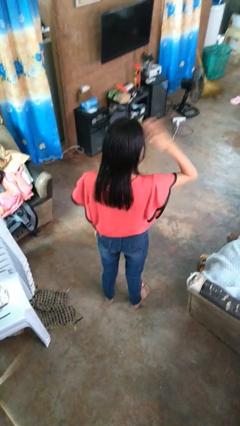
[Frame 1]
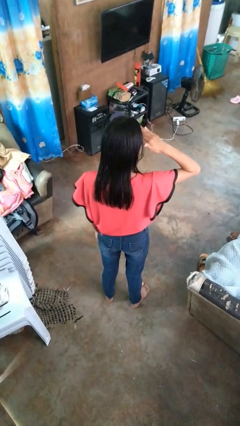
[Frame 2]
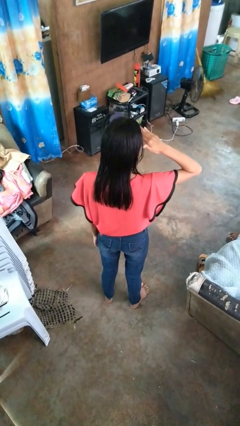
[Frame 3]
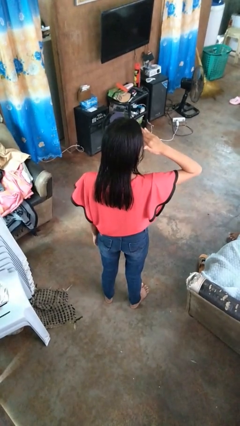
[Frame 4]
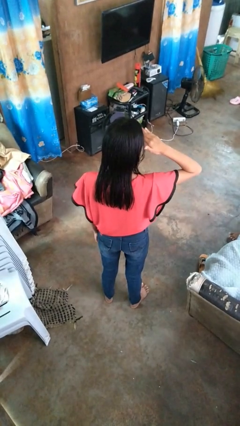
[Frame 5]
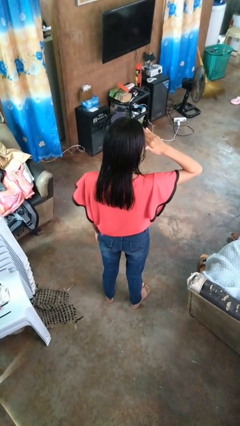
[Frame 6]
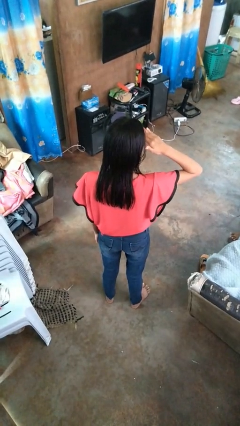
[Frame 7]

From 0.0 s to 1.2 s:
person salutes

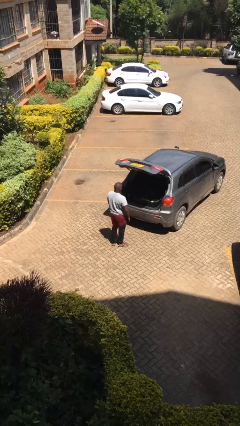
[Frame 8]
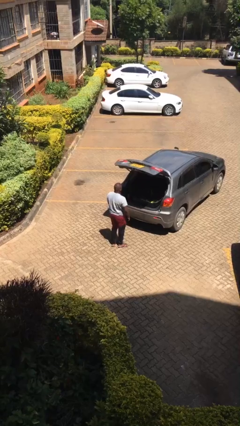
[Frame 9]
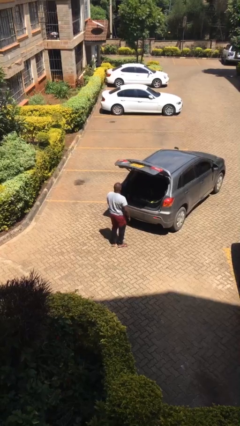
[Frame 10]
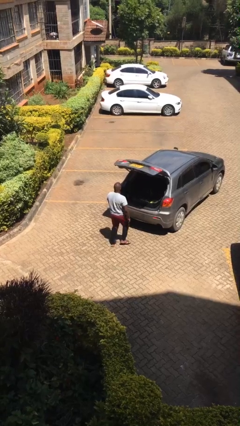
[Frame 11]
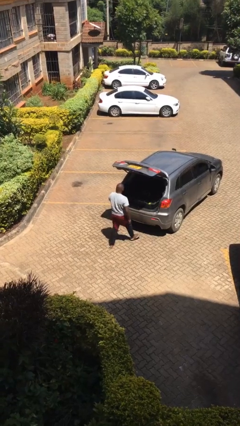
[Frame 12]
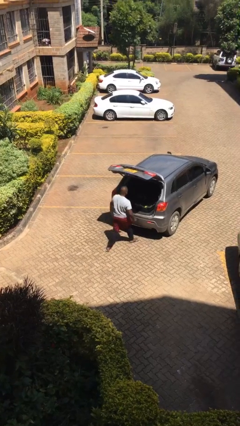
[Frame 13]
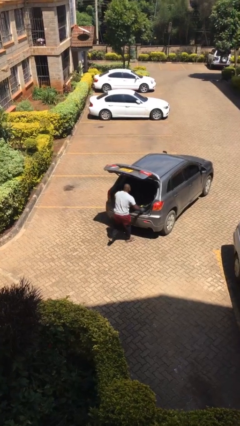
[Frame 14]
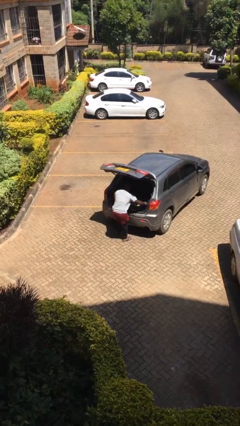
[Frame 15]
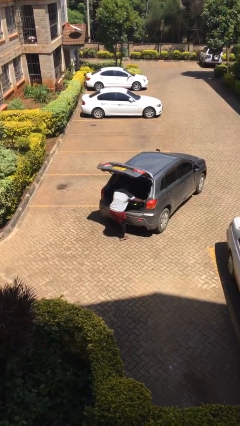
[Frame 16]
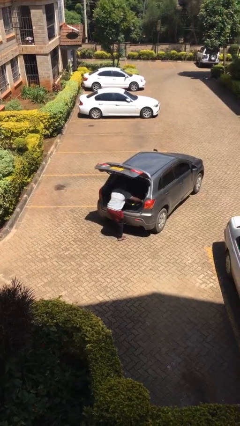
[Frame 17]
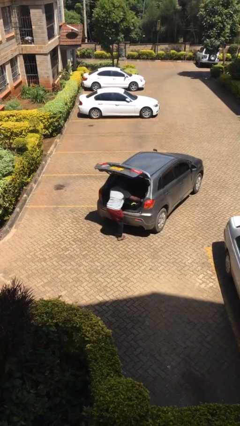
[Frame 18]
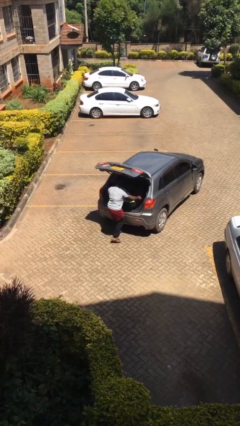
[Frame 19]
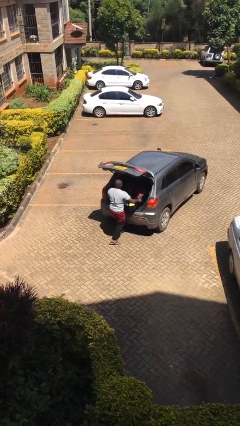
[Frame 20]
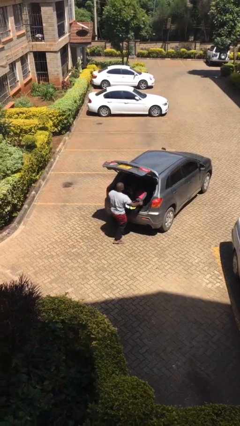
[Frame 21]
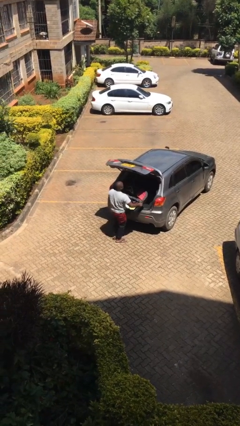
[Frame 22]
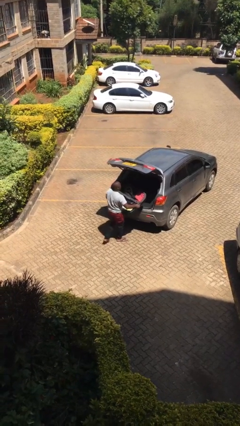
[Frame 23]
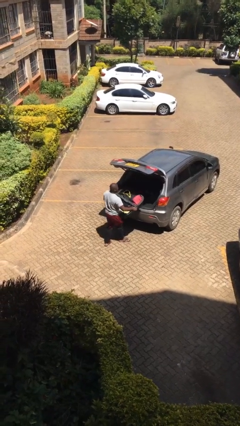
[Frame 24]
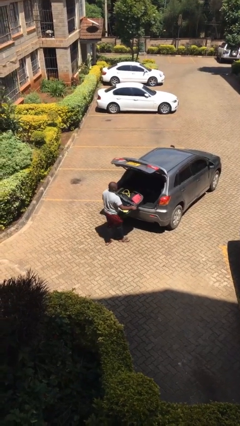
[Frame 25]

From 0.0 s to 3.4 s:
person unloads car

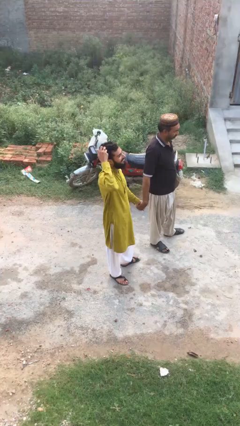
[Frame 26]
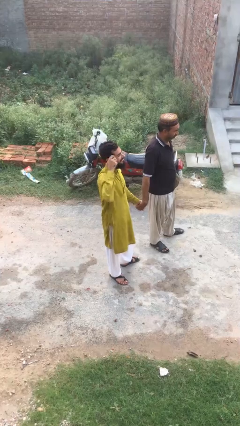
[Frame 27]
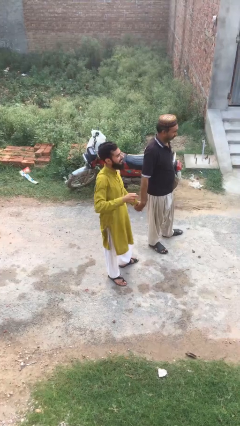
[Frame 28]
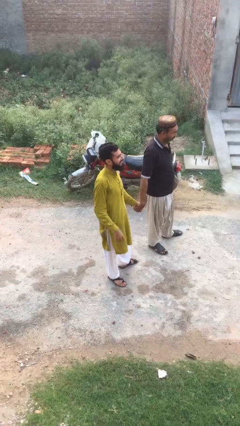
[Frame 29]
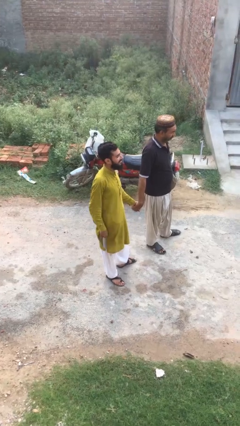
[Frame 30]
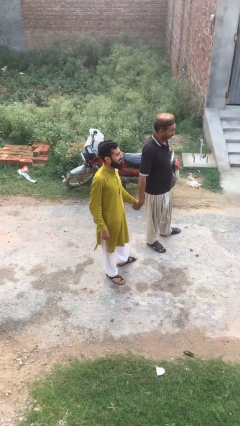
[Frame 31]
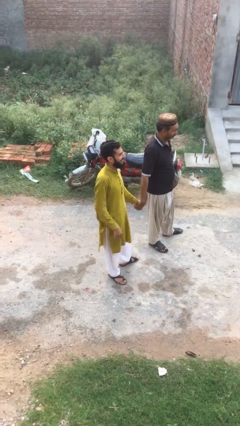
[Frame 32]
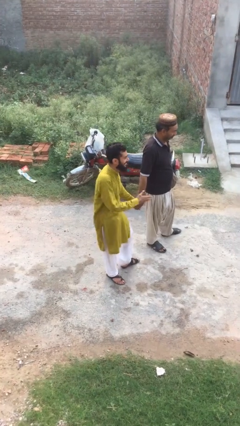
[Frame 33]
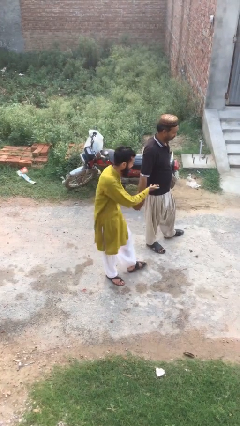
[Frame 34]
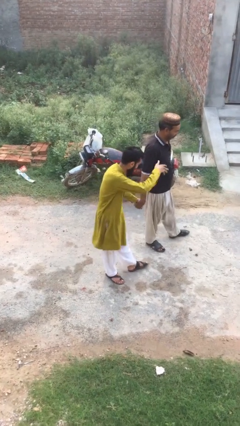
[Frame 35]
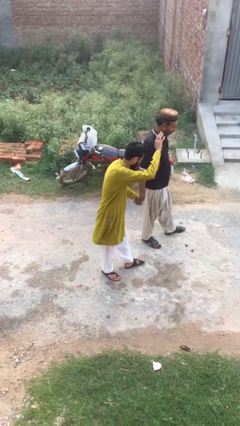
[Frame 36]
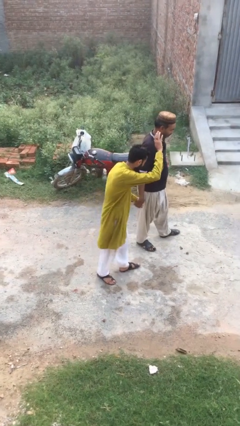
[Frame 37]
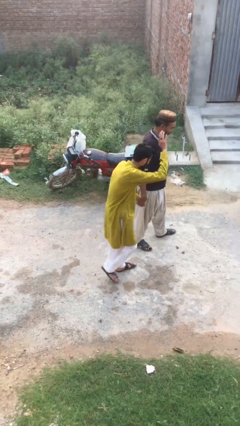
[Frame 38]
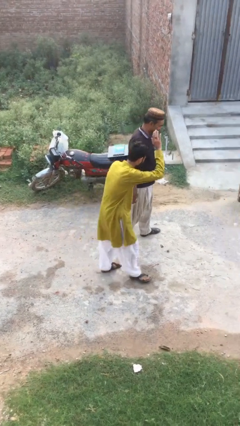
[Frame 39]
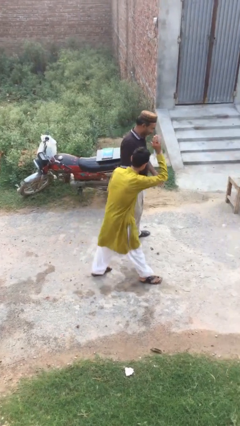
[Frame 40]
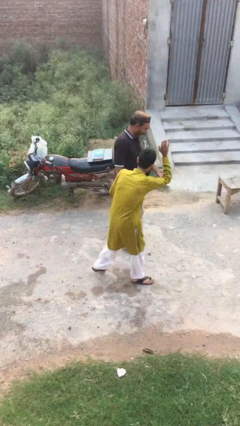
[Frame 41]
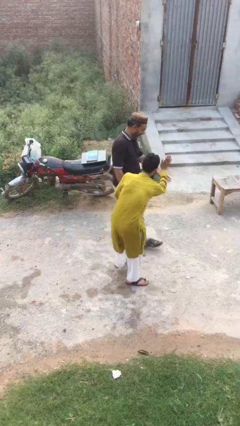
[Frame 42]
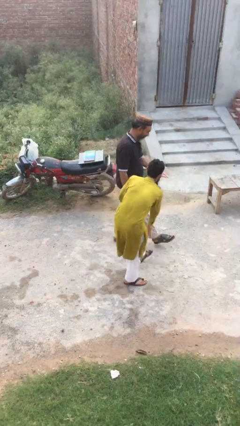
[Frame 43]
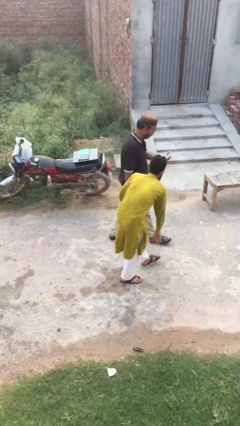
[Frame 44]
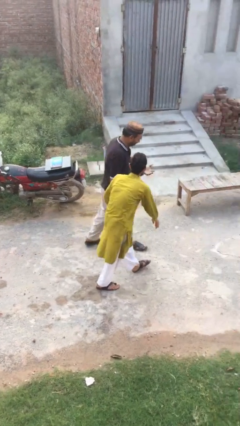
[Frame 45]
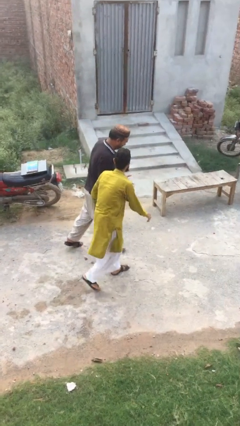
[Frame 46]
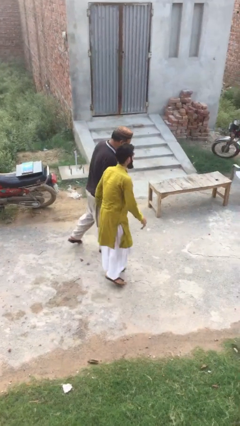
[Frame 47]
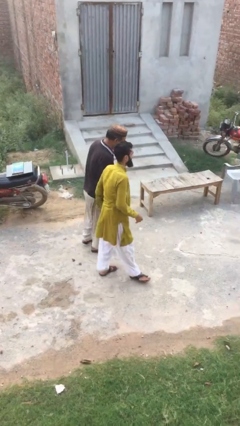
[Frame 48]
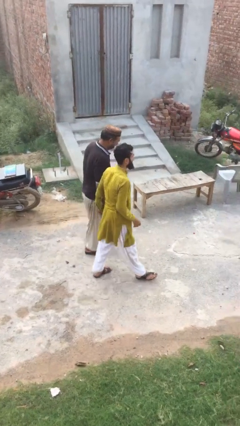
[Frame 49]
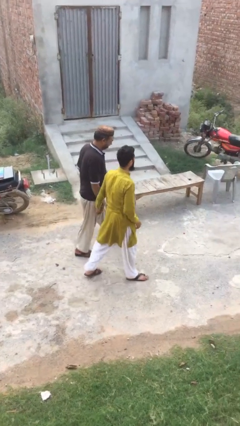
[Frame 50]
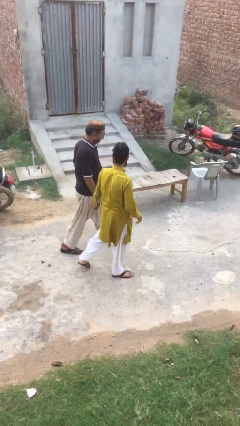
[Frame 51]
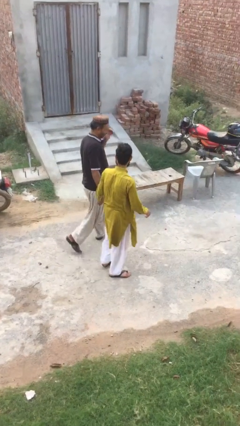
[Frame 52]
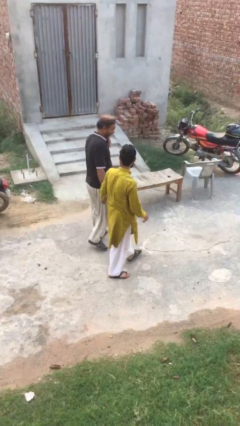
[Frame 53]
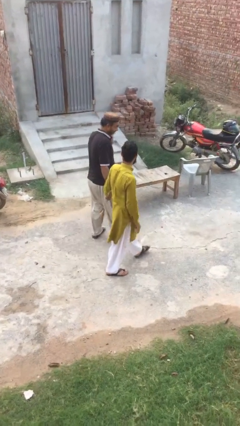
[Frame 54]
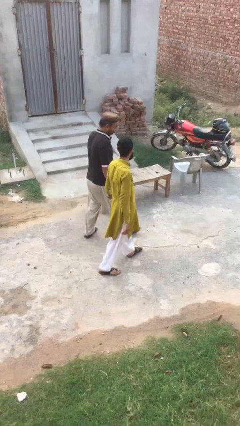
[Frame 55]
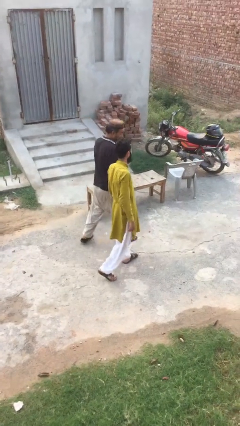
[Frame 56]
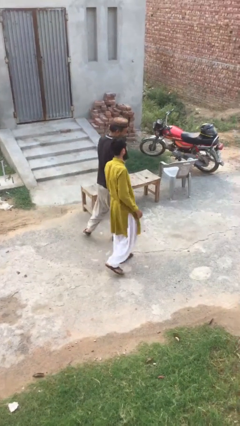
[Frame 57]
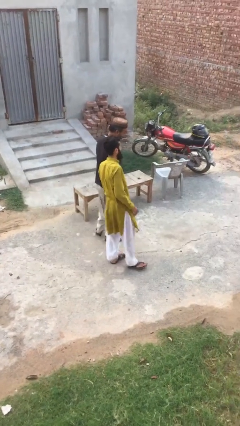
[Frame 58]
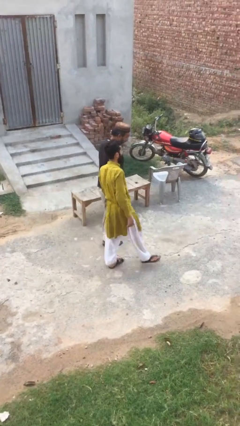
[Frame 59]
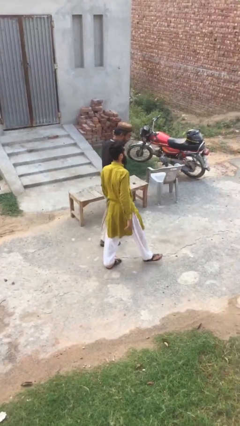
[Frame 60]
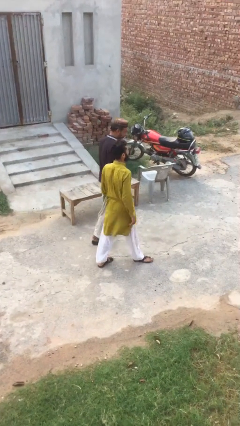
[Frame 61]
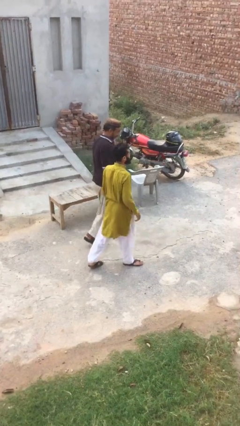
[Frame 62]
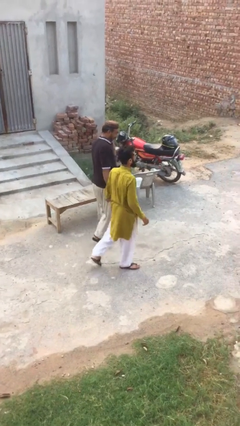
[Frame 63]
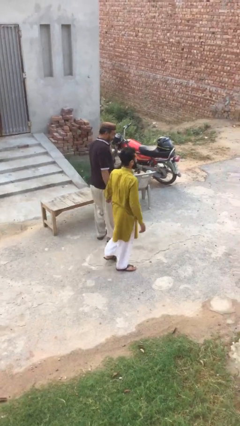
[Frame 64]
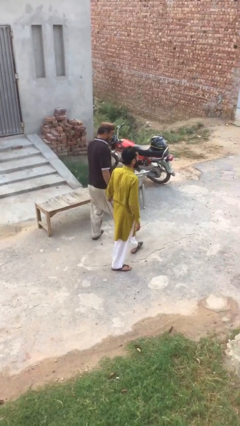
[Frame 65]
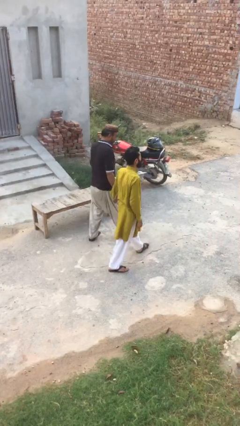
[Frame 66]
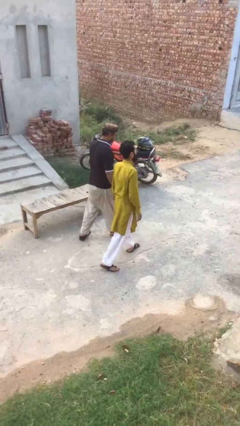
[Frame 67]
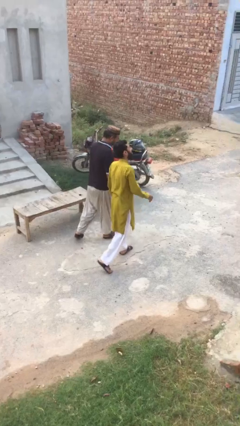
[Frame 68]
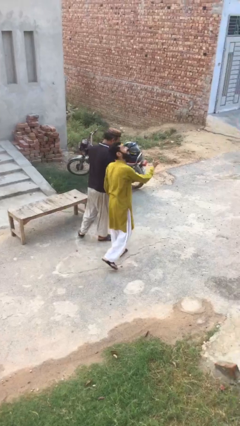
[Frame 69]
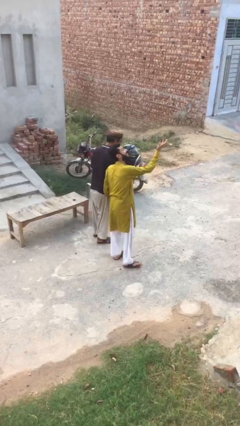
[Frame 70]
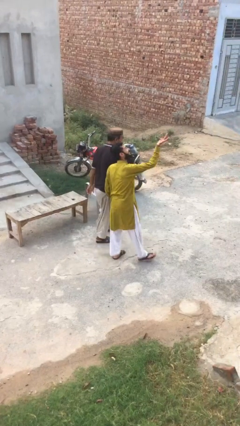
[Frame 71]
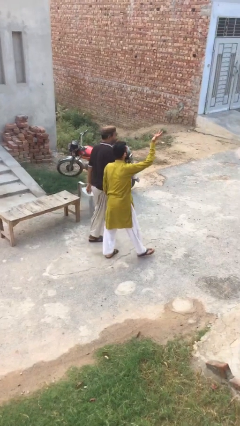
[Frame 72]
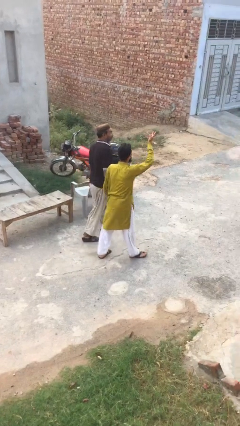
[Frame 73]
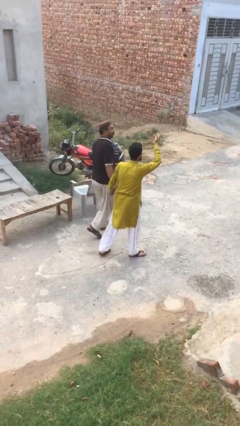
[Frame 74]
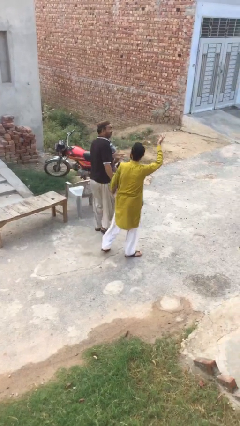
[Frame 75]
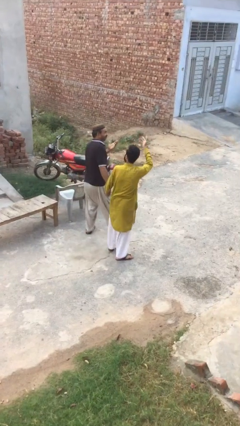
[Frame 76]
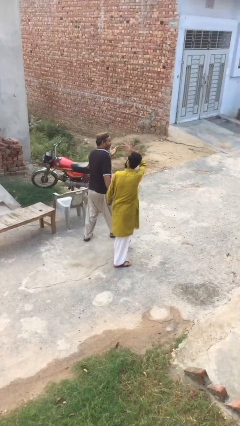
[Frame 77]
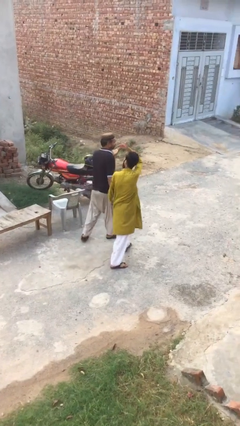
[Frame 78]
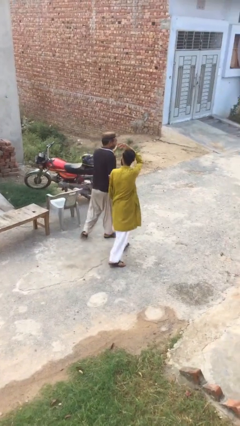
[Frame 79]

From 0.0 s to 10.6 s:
person holds hand

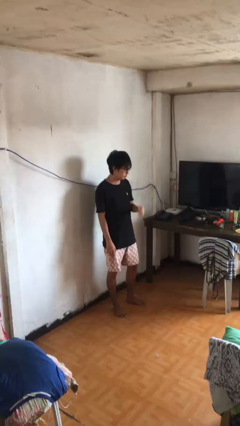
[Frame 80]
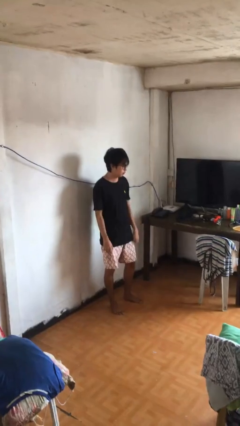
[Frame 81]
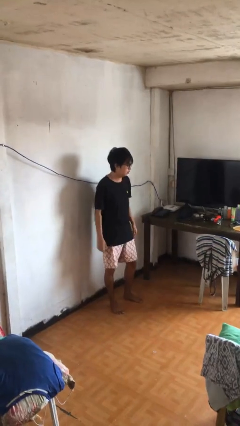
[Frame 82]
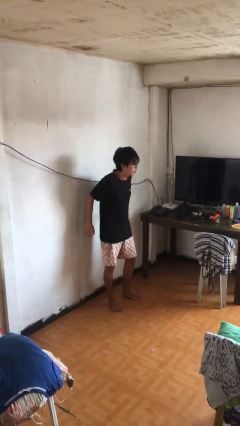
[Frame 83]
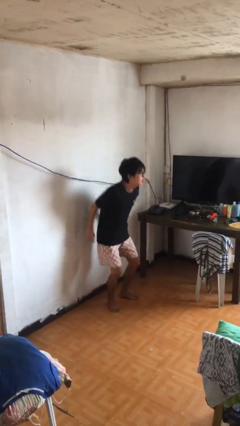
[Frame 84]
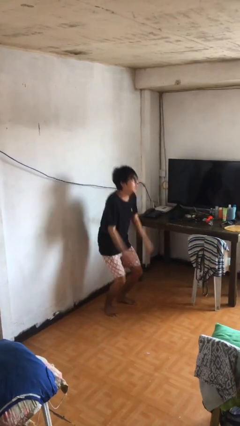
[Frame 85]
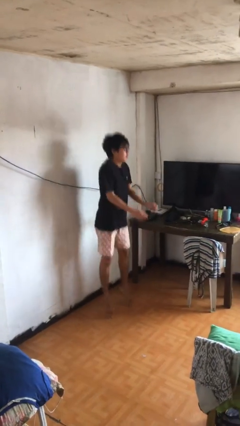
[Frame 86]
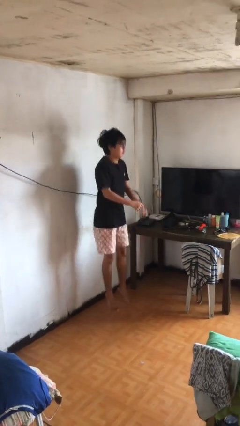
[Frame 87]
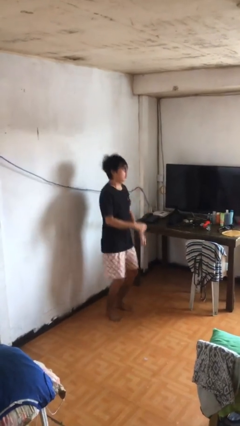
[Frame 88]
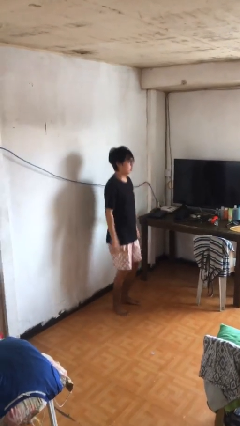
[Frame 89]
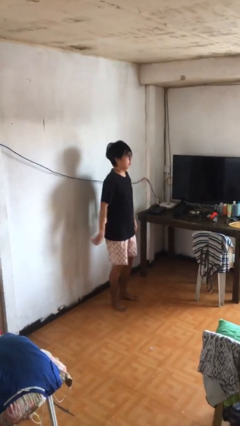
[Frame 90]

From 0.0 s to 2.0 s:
person jumps

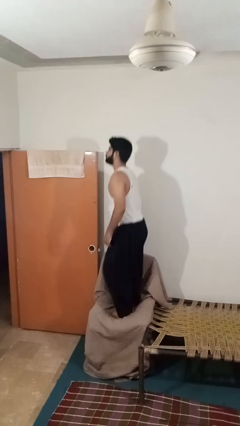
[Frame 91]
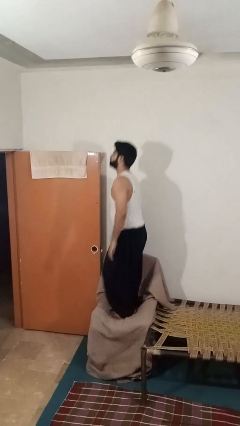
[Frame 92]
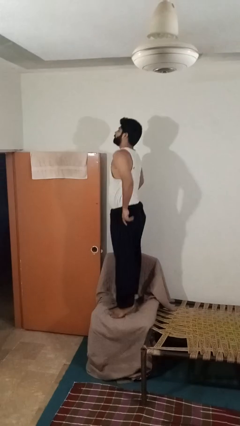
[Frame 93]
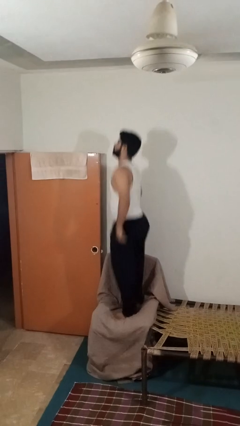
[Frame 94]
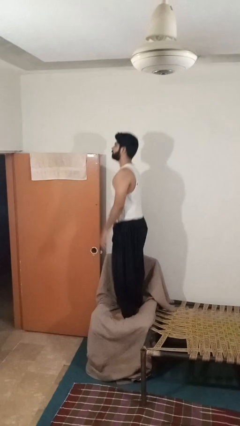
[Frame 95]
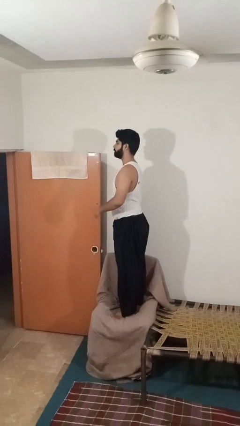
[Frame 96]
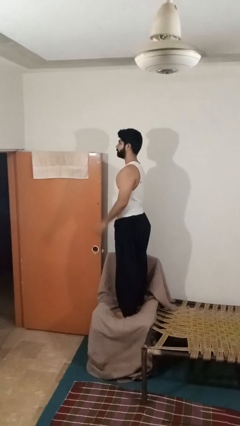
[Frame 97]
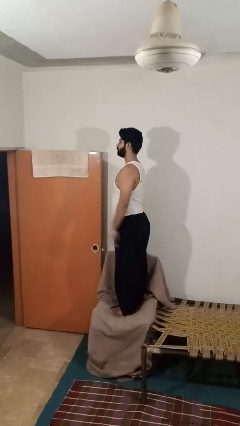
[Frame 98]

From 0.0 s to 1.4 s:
person jumps on couch
